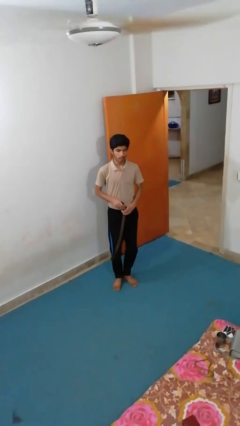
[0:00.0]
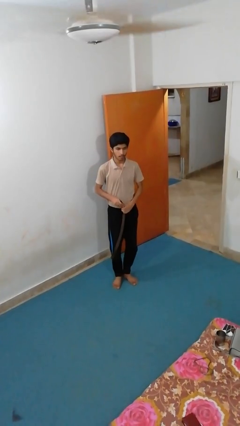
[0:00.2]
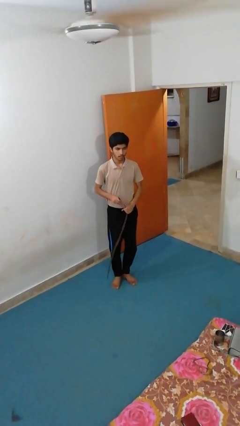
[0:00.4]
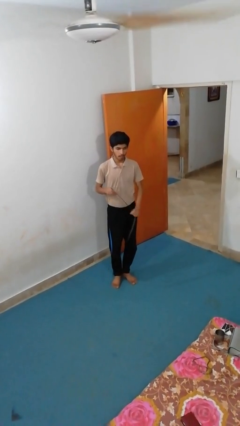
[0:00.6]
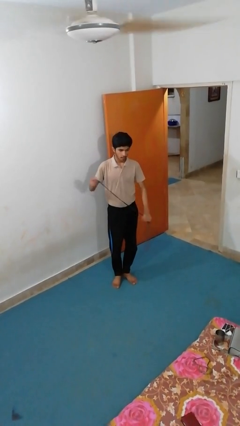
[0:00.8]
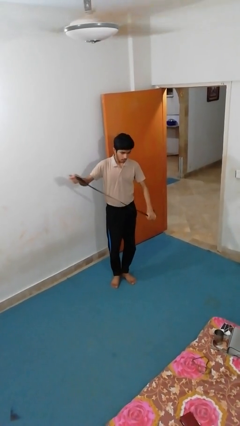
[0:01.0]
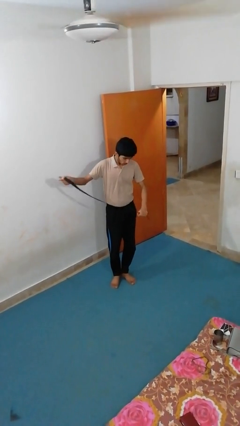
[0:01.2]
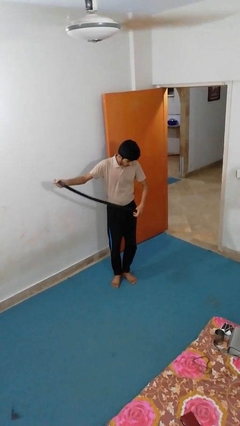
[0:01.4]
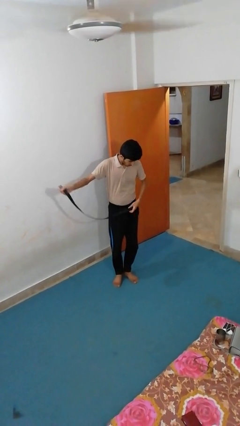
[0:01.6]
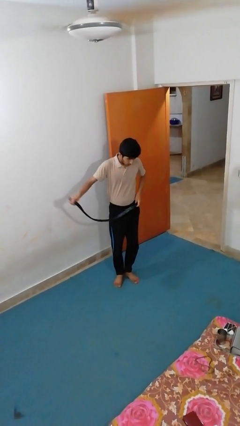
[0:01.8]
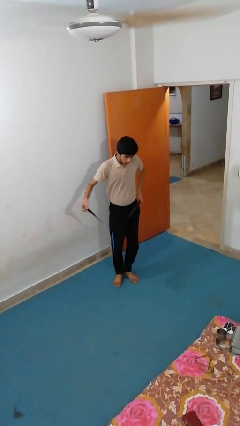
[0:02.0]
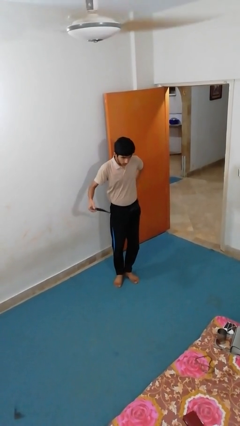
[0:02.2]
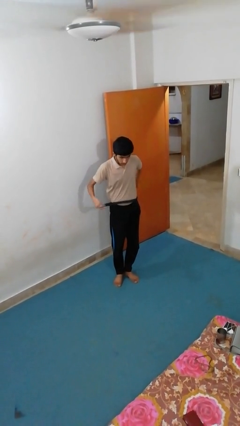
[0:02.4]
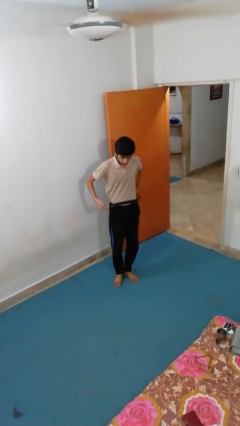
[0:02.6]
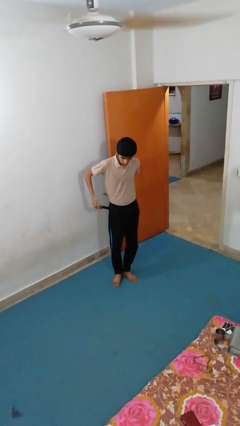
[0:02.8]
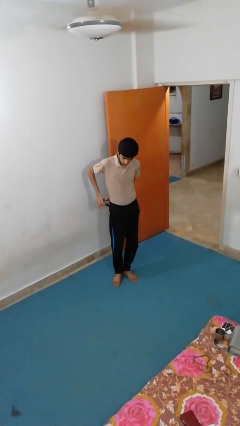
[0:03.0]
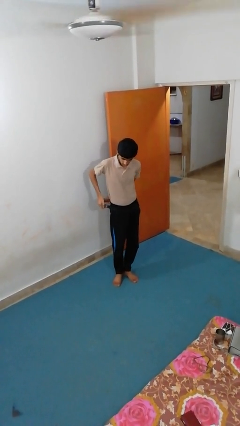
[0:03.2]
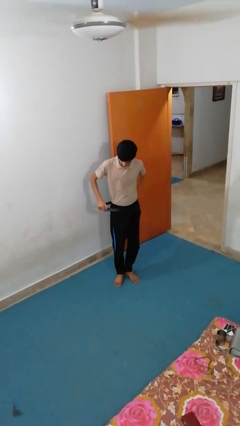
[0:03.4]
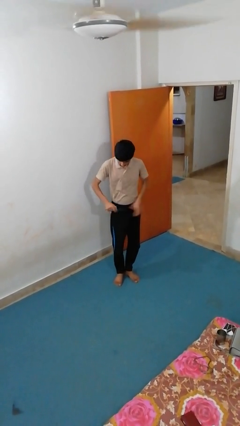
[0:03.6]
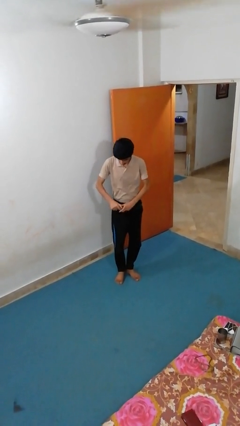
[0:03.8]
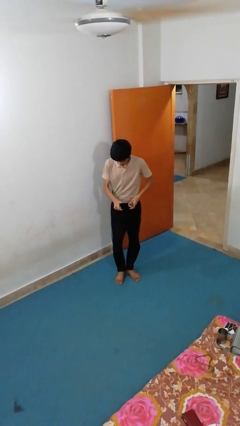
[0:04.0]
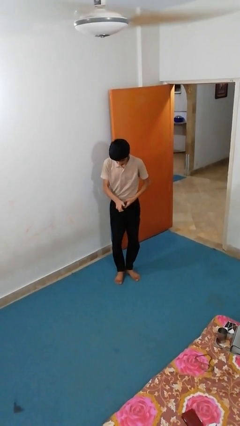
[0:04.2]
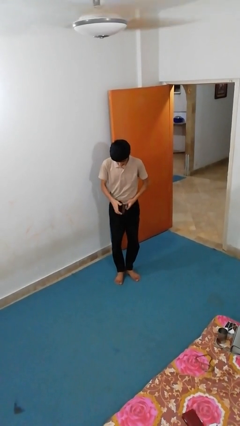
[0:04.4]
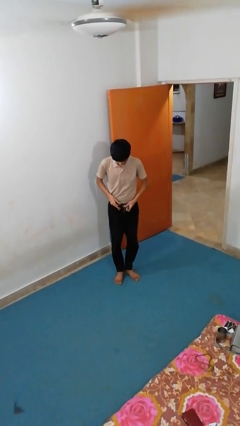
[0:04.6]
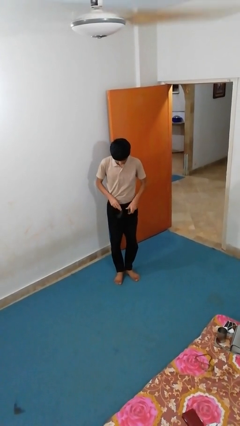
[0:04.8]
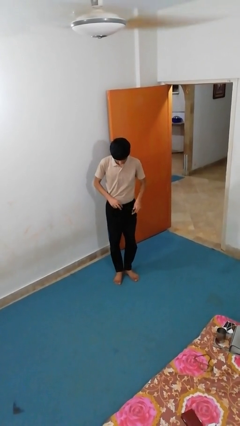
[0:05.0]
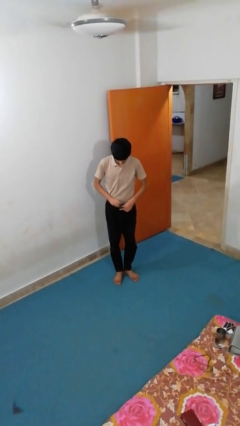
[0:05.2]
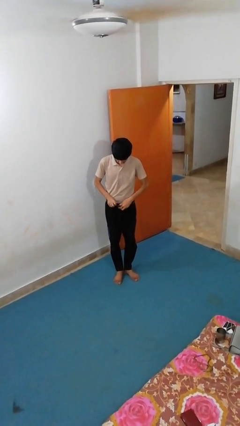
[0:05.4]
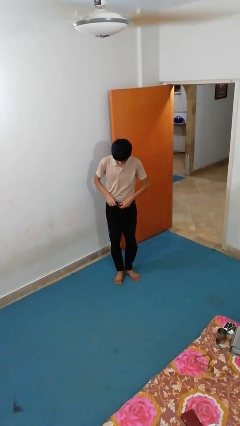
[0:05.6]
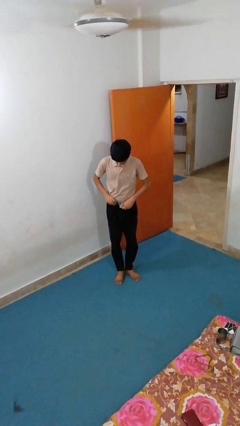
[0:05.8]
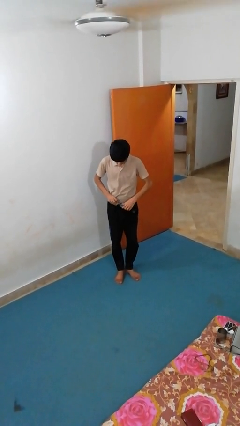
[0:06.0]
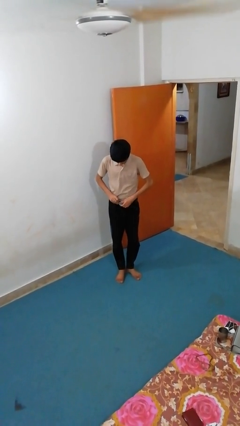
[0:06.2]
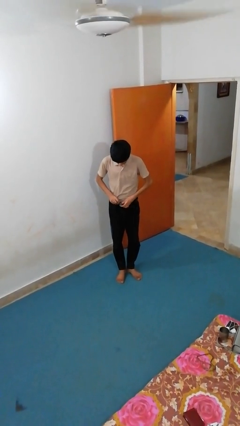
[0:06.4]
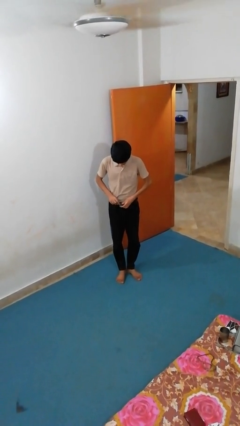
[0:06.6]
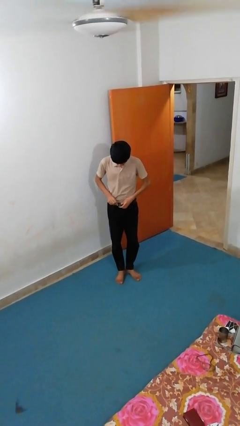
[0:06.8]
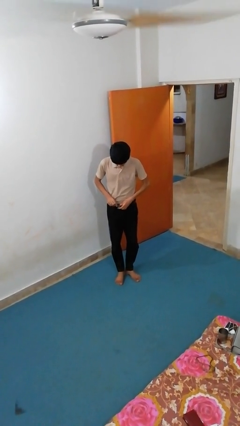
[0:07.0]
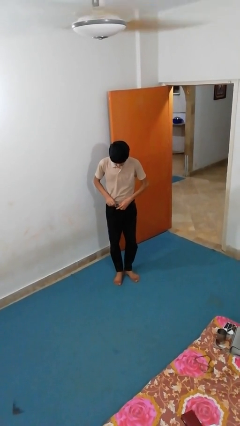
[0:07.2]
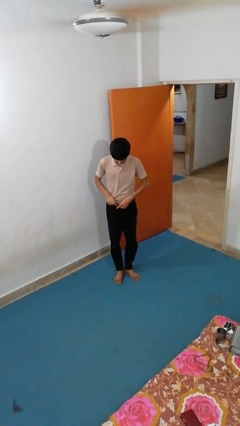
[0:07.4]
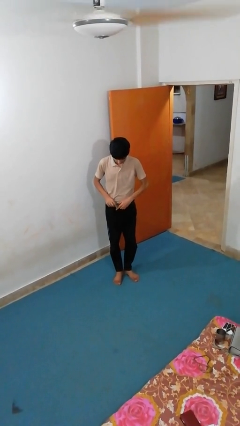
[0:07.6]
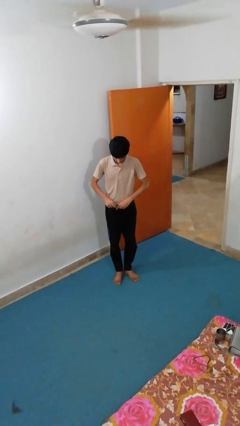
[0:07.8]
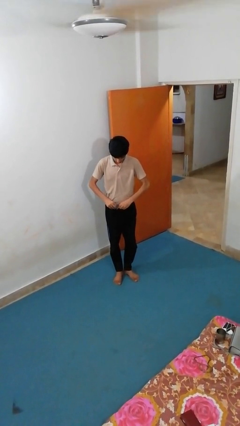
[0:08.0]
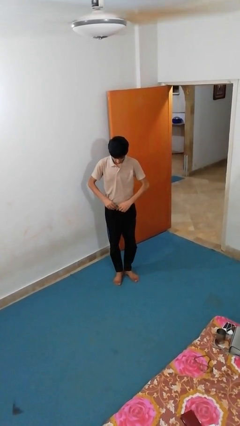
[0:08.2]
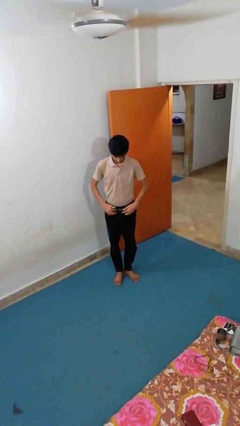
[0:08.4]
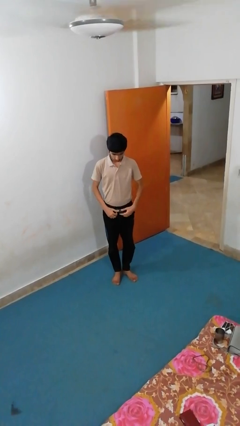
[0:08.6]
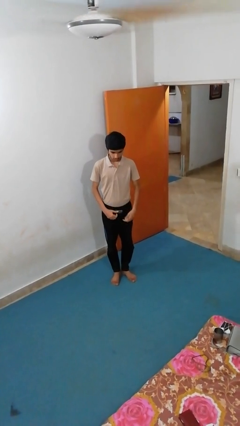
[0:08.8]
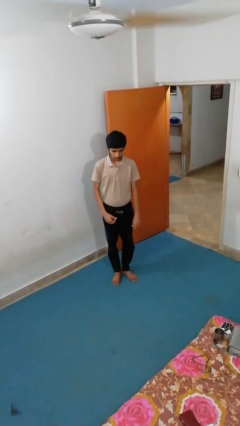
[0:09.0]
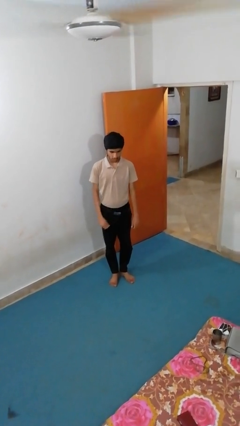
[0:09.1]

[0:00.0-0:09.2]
person puts on belt

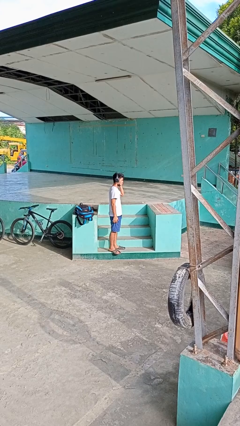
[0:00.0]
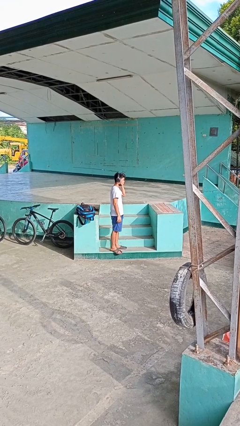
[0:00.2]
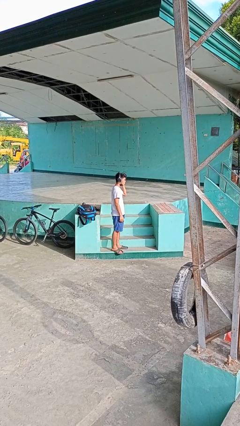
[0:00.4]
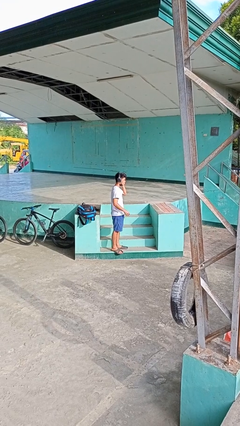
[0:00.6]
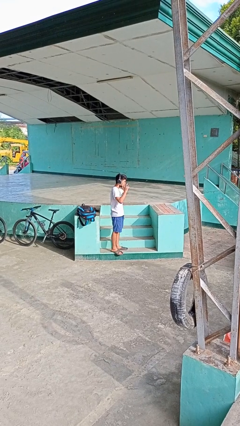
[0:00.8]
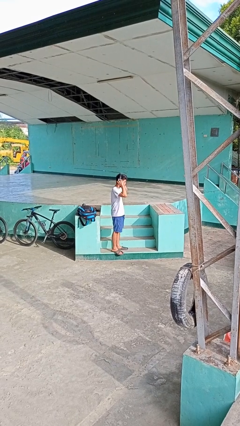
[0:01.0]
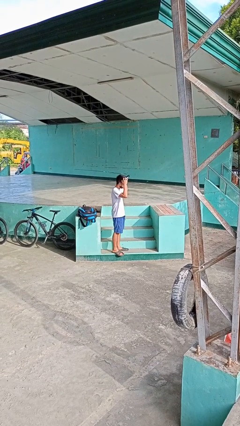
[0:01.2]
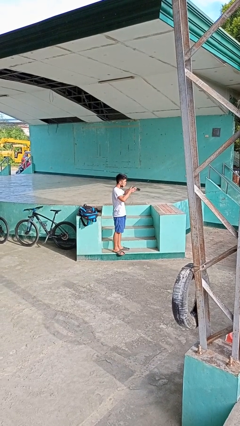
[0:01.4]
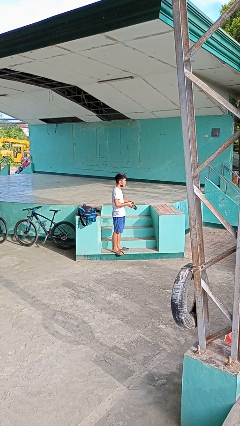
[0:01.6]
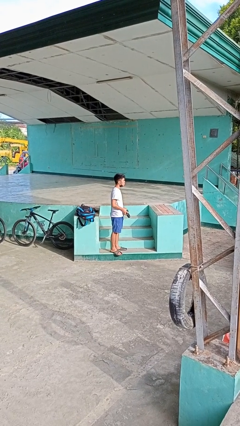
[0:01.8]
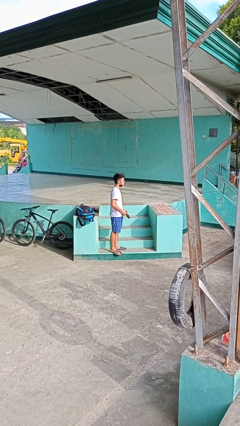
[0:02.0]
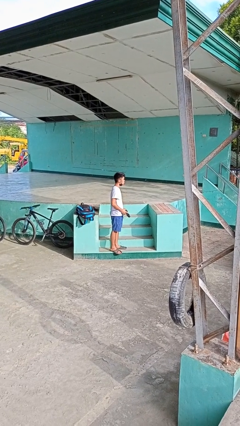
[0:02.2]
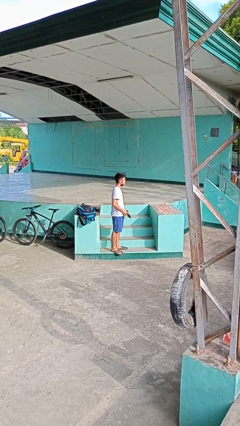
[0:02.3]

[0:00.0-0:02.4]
person takes off headphones

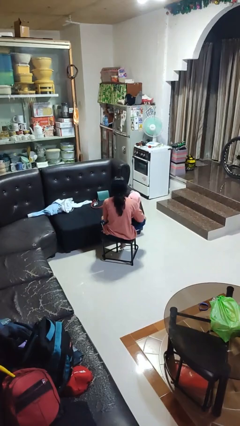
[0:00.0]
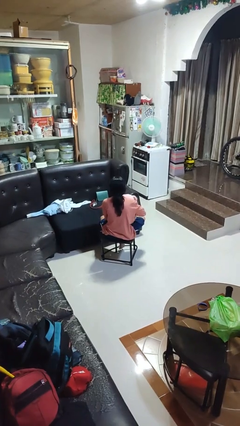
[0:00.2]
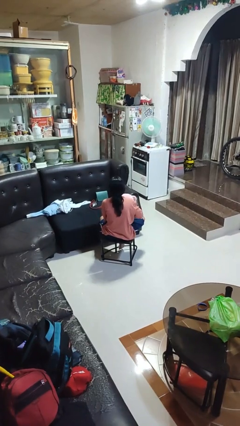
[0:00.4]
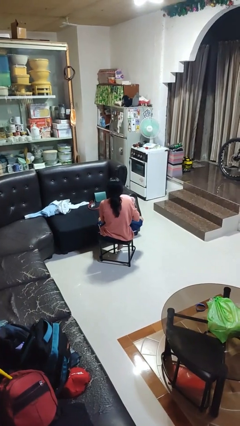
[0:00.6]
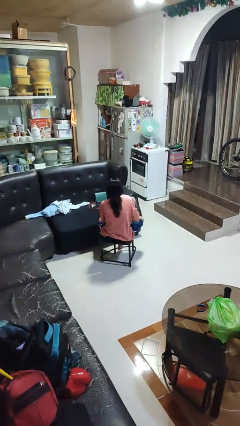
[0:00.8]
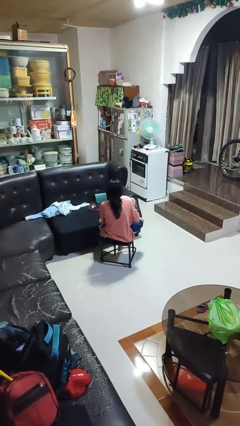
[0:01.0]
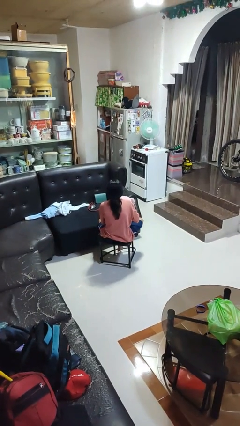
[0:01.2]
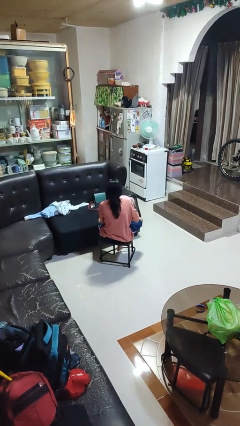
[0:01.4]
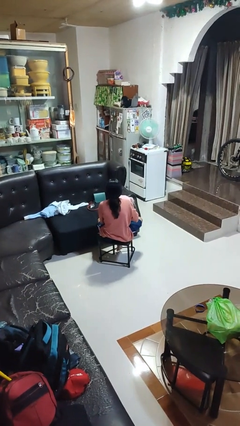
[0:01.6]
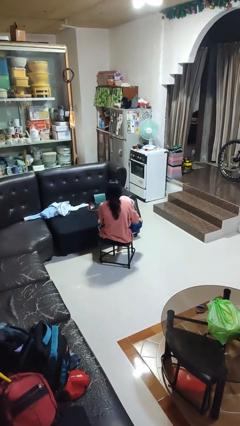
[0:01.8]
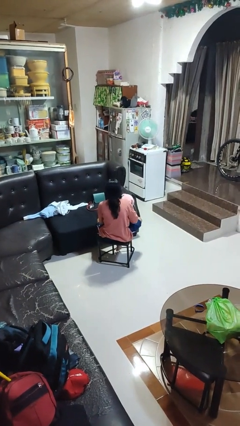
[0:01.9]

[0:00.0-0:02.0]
person hugs stuffed animal

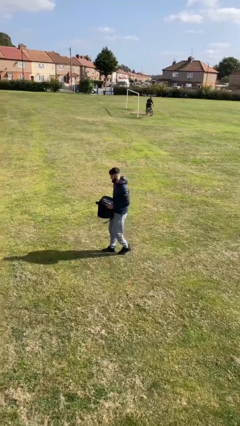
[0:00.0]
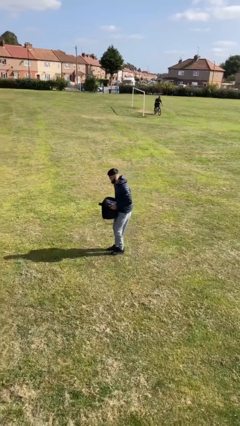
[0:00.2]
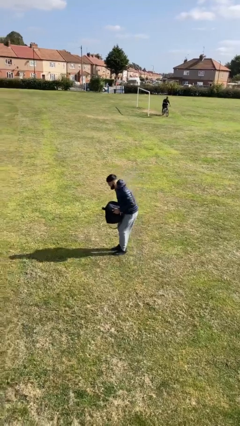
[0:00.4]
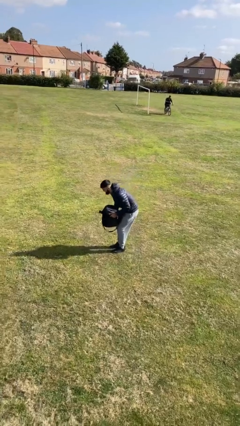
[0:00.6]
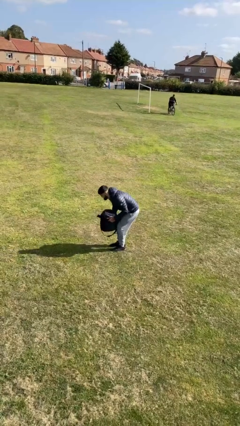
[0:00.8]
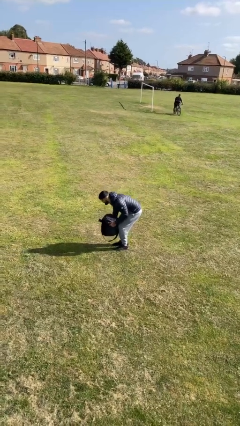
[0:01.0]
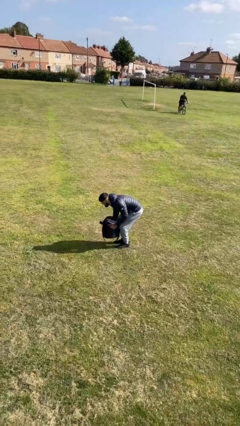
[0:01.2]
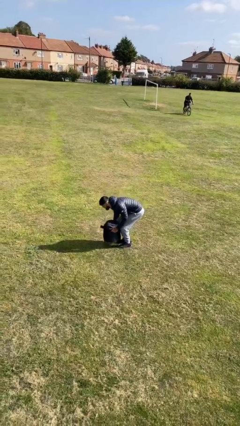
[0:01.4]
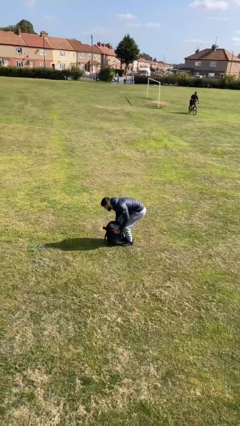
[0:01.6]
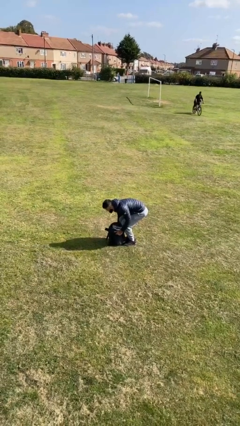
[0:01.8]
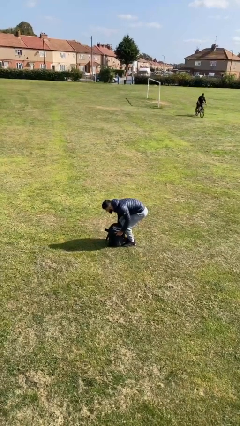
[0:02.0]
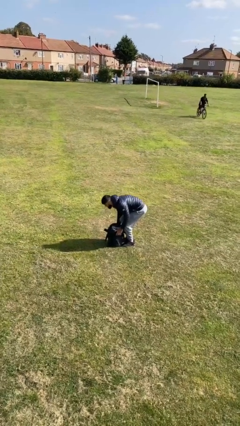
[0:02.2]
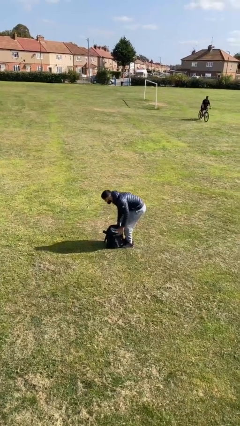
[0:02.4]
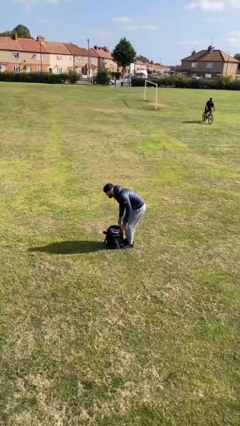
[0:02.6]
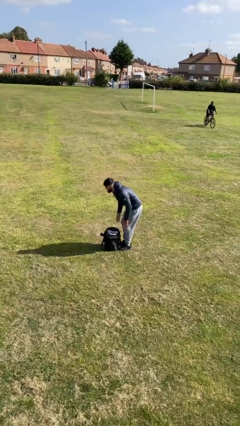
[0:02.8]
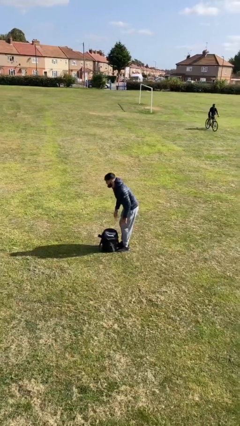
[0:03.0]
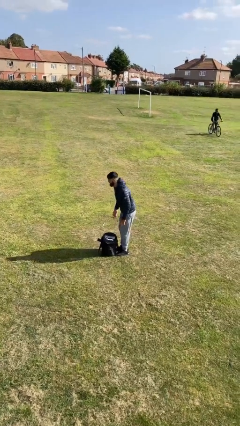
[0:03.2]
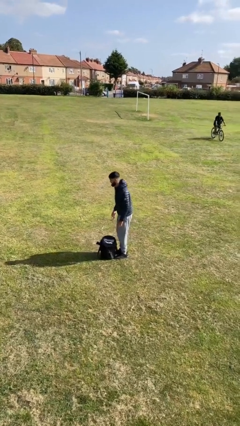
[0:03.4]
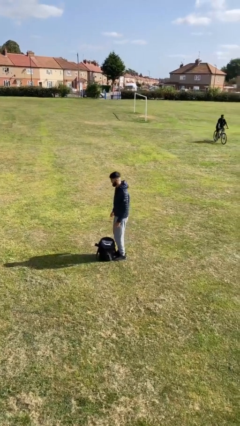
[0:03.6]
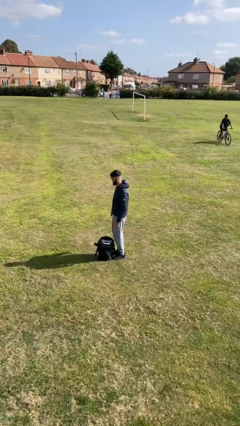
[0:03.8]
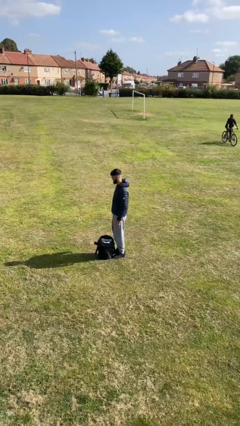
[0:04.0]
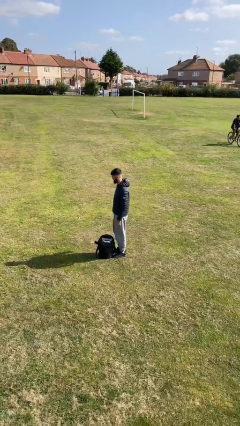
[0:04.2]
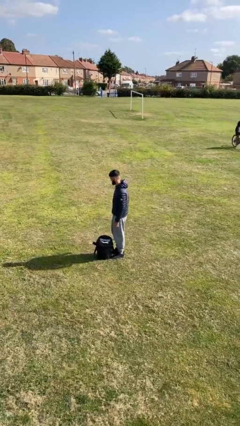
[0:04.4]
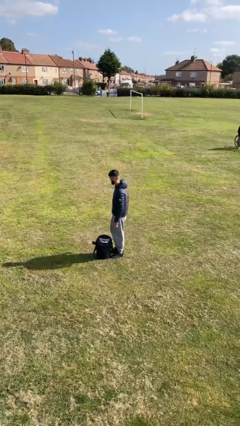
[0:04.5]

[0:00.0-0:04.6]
person puts down object on floor
